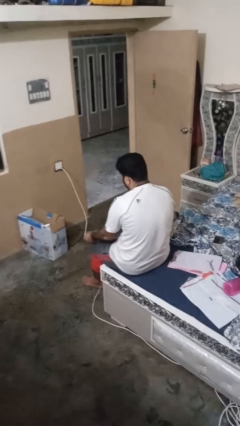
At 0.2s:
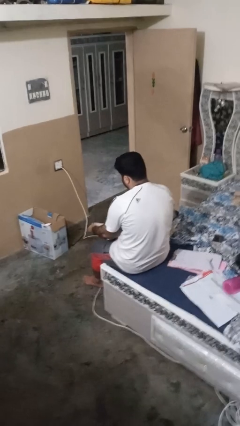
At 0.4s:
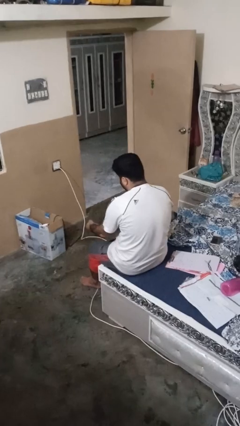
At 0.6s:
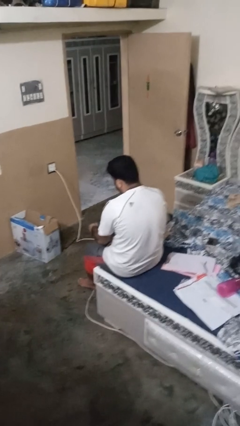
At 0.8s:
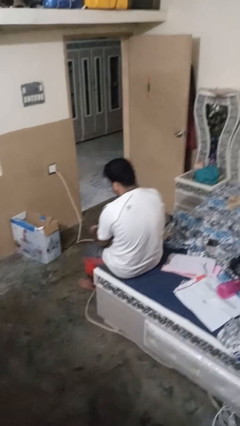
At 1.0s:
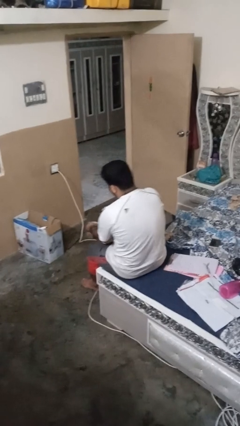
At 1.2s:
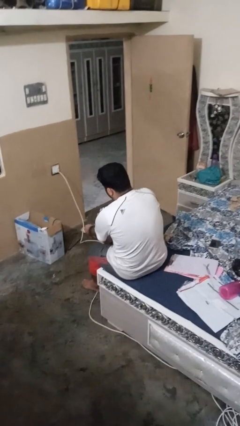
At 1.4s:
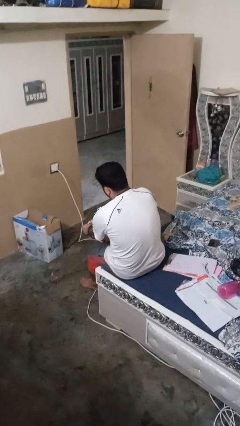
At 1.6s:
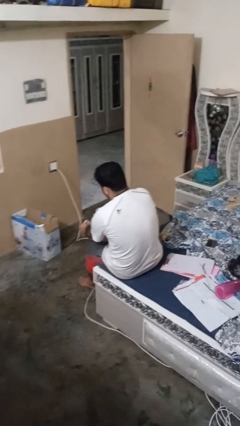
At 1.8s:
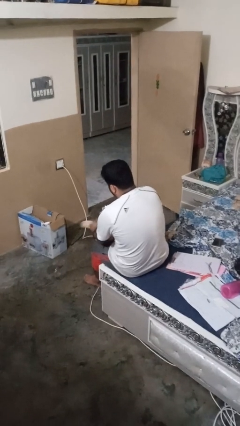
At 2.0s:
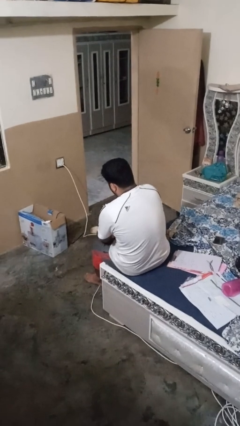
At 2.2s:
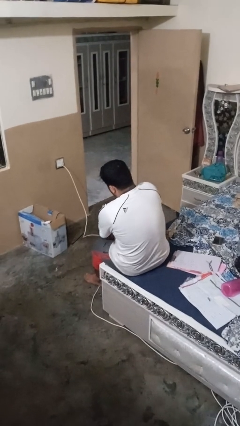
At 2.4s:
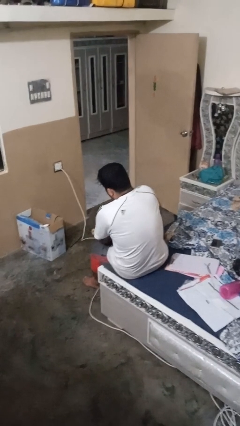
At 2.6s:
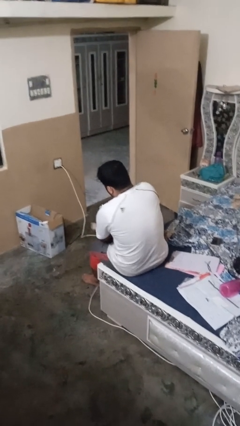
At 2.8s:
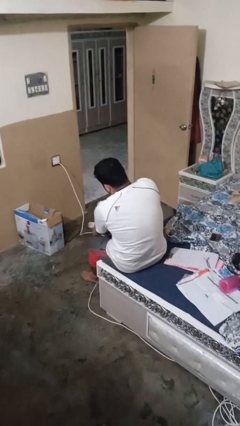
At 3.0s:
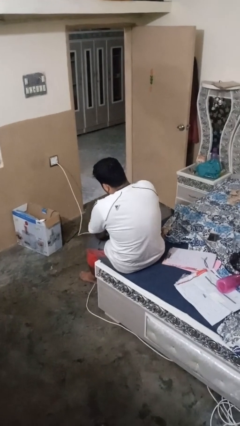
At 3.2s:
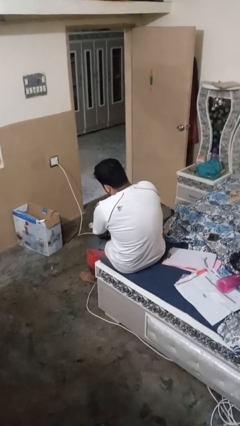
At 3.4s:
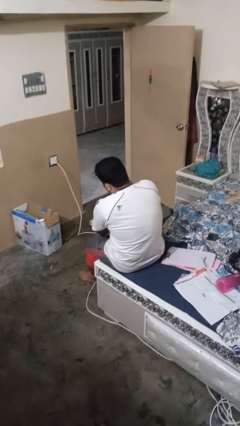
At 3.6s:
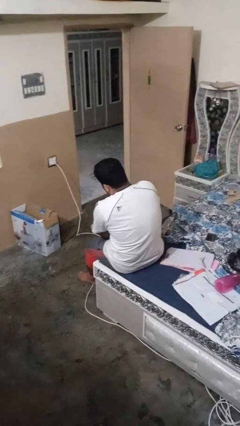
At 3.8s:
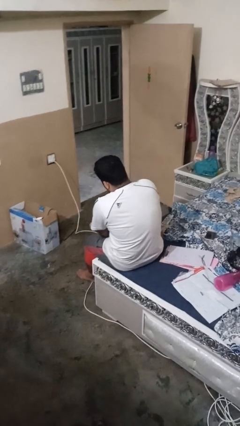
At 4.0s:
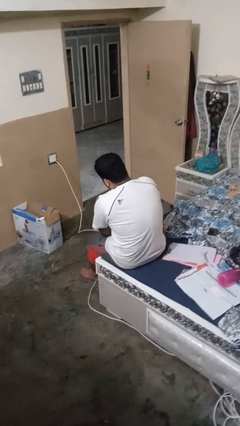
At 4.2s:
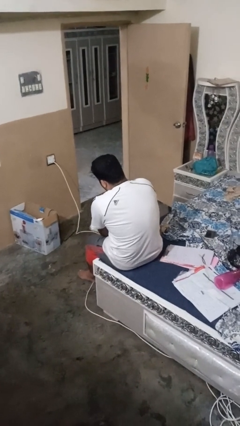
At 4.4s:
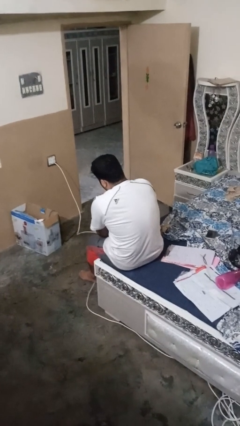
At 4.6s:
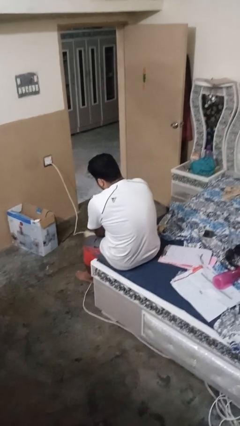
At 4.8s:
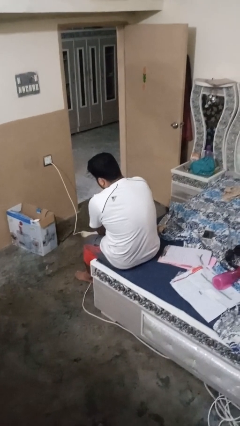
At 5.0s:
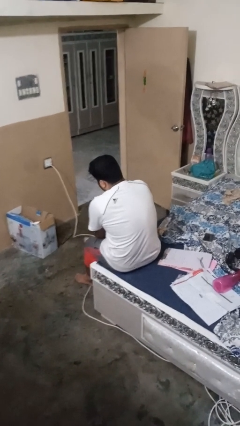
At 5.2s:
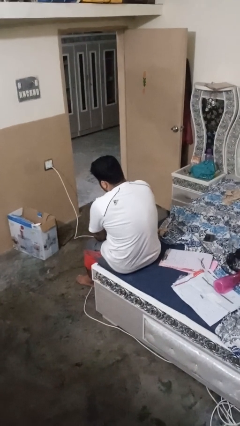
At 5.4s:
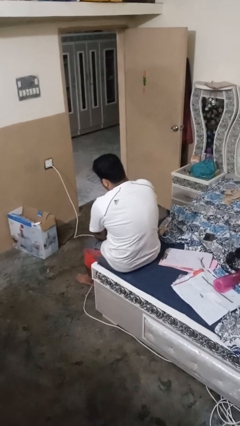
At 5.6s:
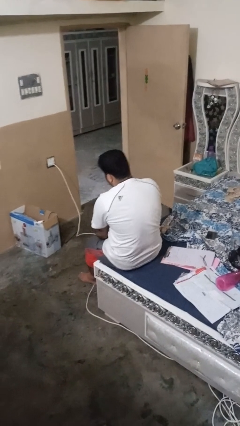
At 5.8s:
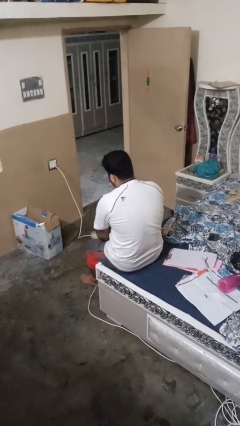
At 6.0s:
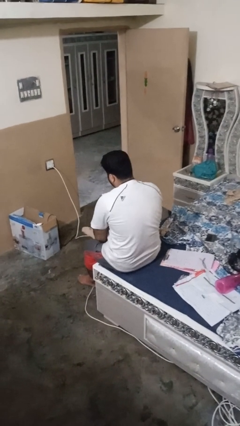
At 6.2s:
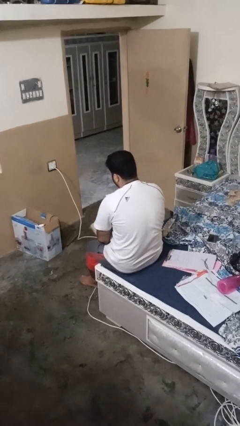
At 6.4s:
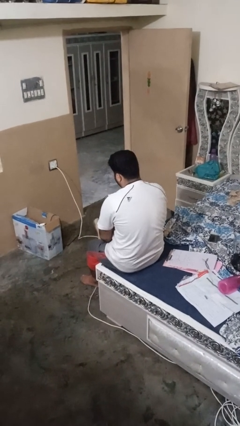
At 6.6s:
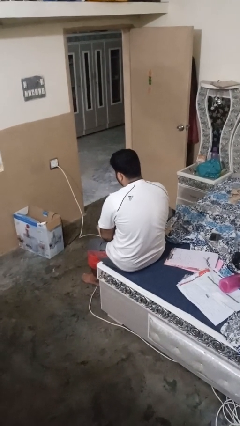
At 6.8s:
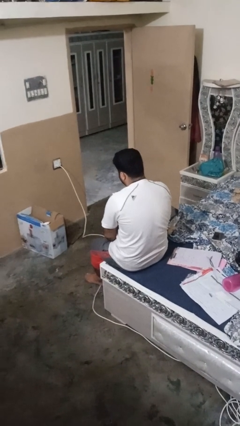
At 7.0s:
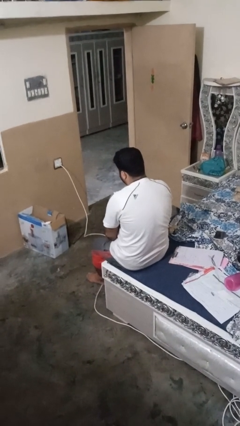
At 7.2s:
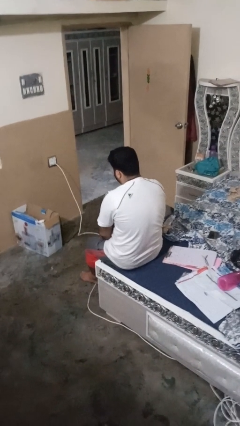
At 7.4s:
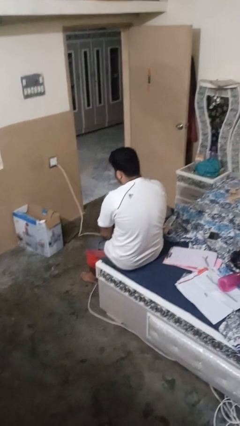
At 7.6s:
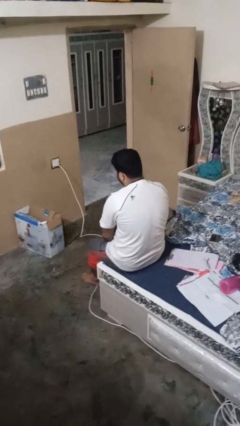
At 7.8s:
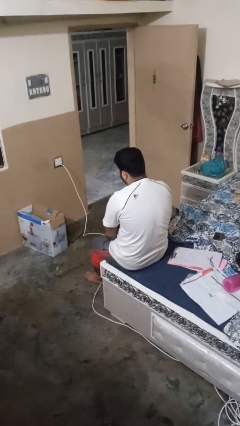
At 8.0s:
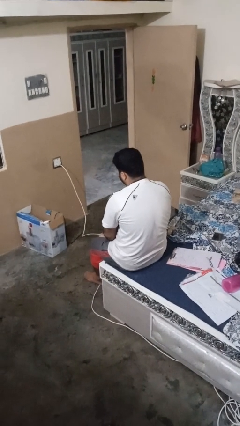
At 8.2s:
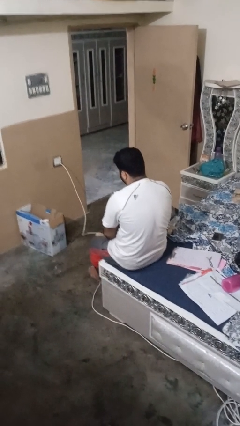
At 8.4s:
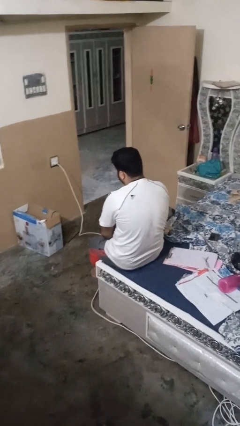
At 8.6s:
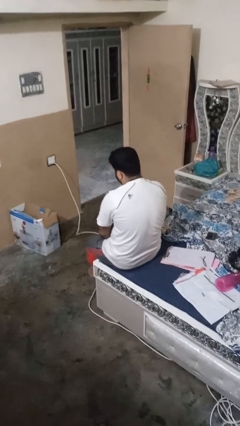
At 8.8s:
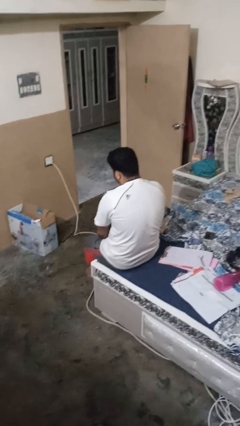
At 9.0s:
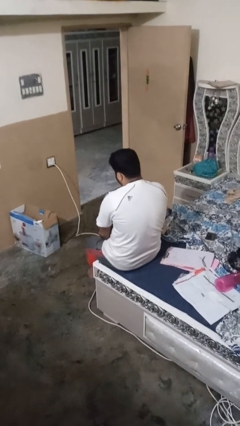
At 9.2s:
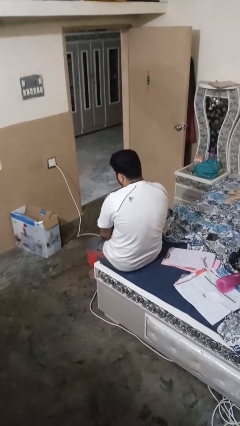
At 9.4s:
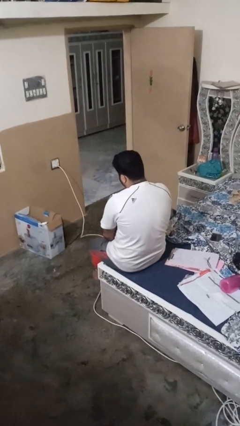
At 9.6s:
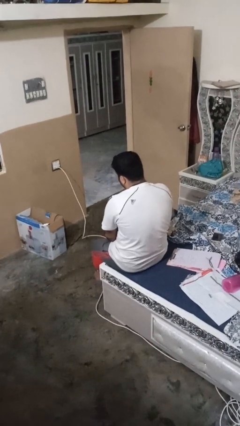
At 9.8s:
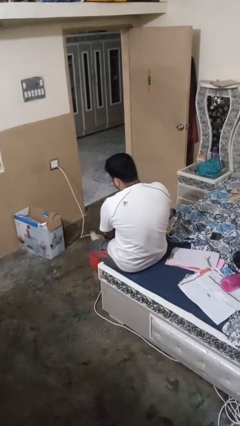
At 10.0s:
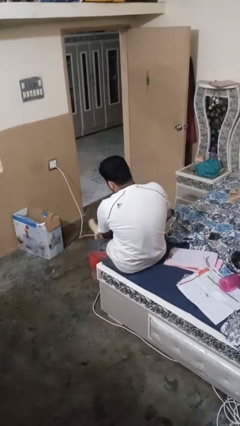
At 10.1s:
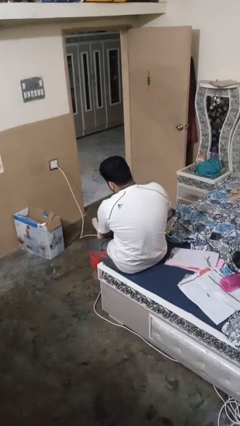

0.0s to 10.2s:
person puts on socks

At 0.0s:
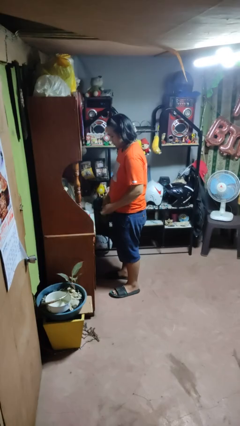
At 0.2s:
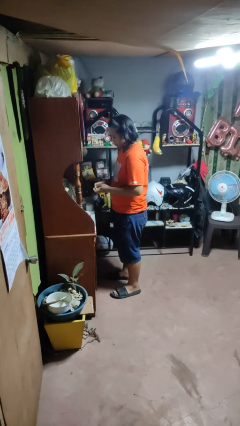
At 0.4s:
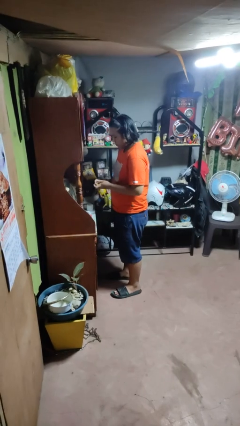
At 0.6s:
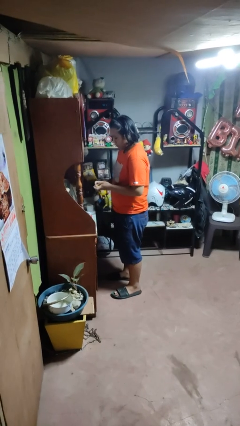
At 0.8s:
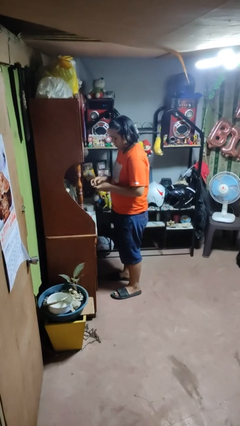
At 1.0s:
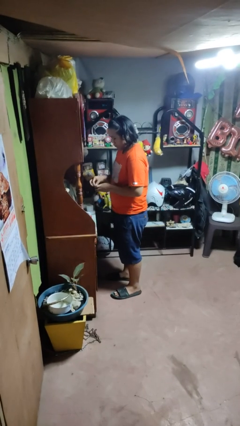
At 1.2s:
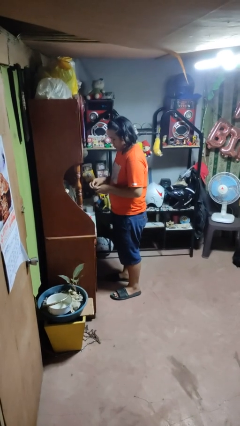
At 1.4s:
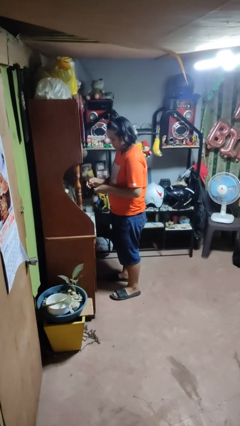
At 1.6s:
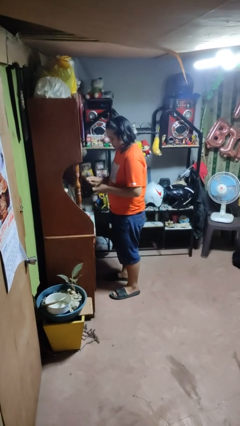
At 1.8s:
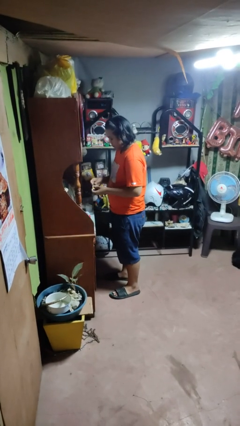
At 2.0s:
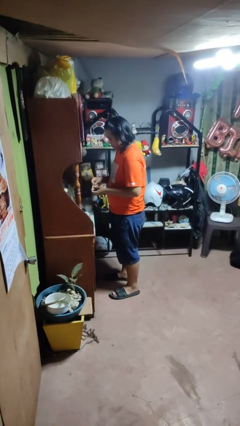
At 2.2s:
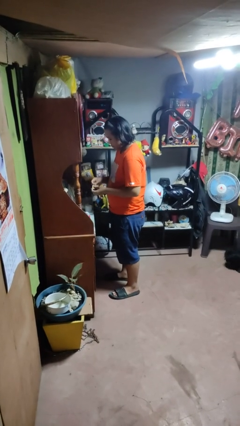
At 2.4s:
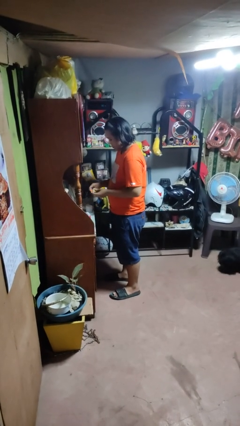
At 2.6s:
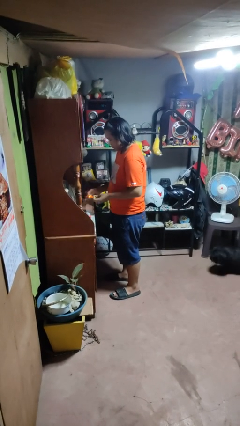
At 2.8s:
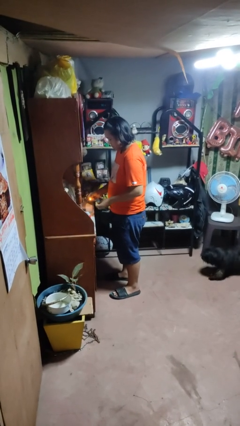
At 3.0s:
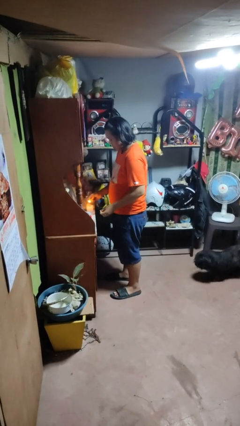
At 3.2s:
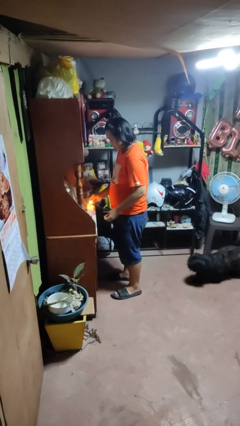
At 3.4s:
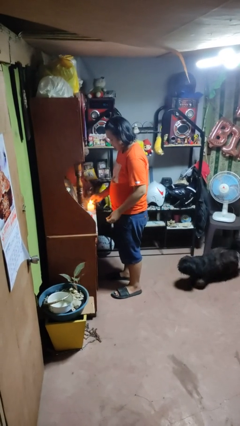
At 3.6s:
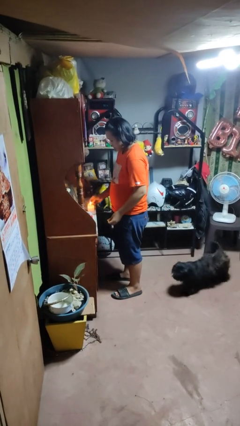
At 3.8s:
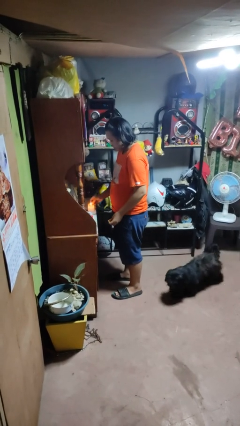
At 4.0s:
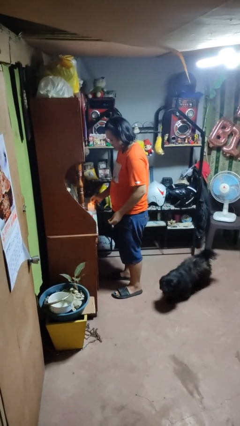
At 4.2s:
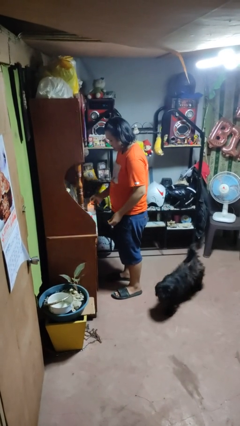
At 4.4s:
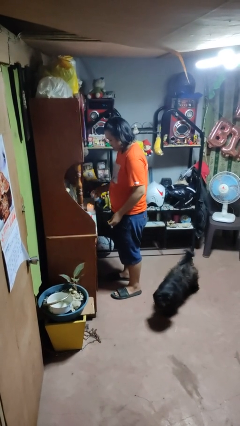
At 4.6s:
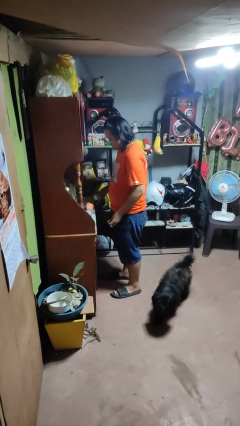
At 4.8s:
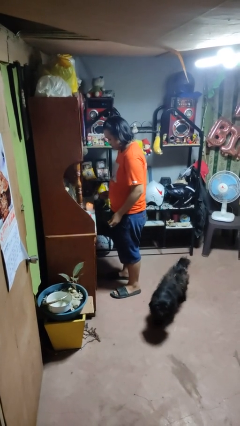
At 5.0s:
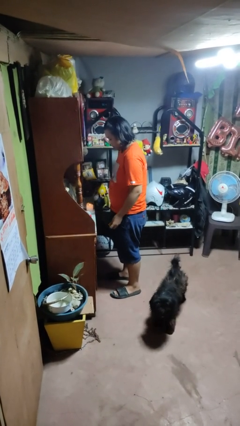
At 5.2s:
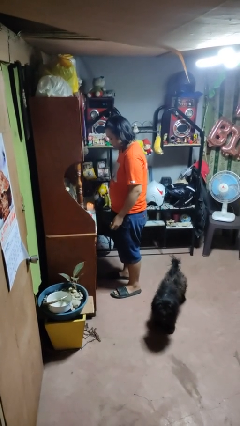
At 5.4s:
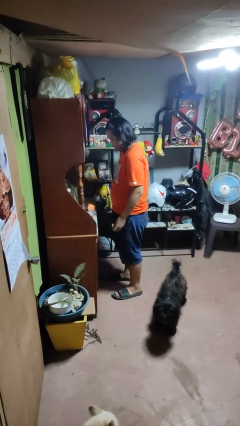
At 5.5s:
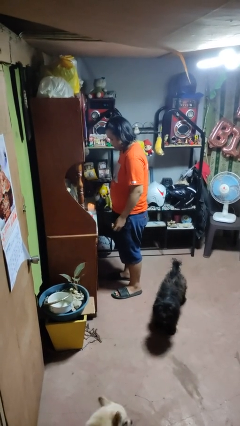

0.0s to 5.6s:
person lights candle

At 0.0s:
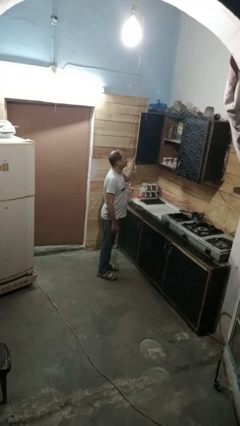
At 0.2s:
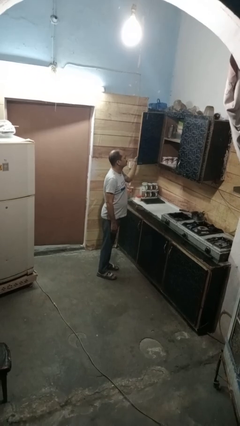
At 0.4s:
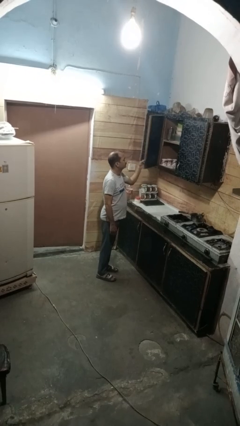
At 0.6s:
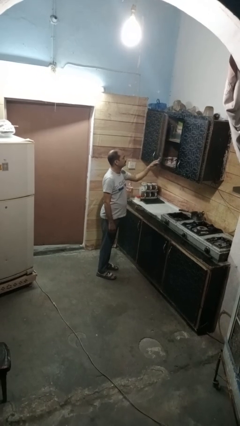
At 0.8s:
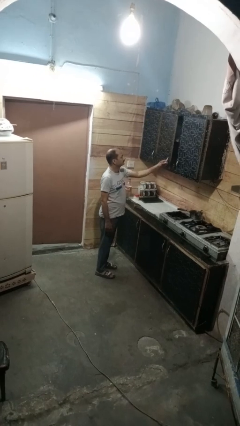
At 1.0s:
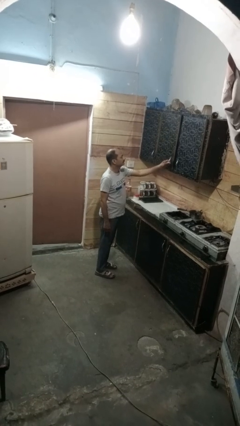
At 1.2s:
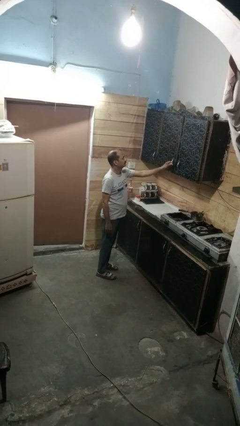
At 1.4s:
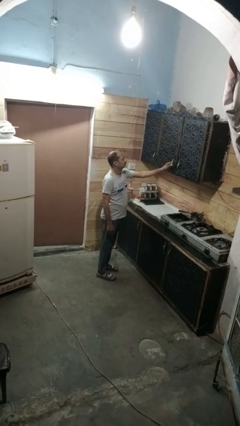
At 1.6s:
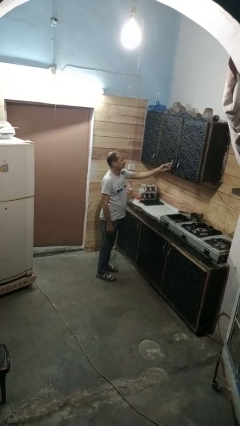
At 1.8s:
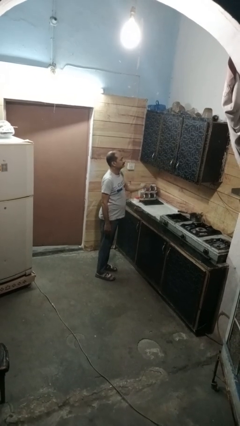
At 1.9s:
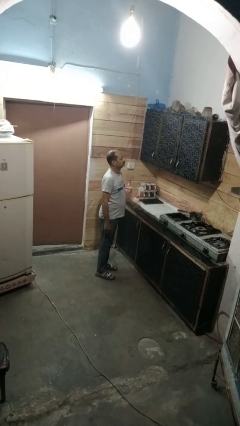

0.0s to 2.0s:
person closes cabinet
